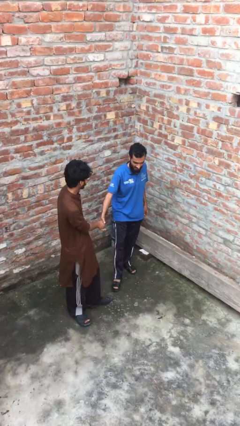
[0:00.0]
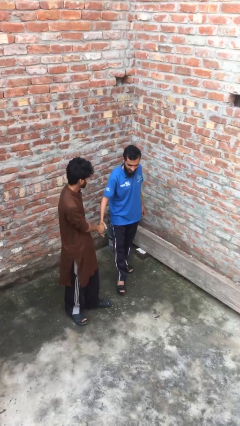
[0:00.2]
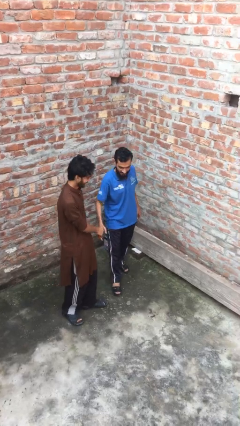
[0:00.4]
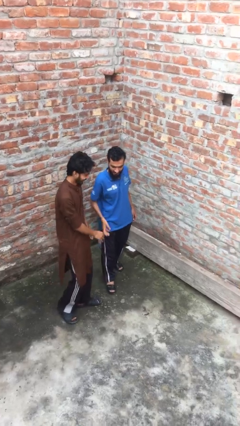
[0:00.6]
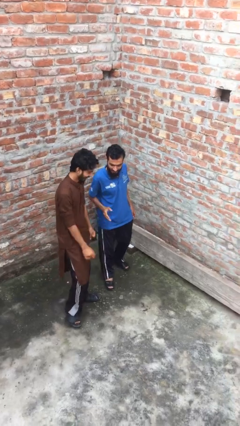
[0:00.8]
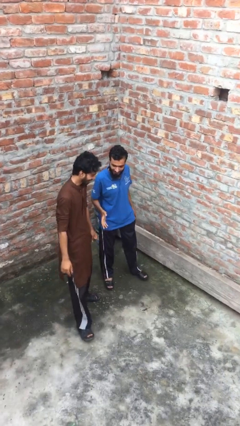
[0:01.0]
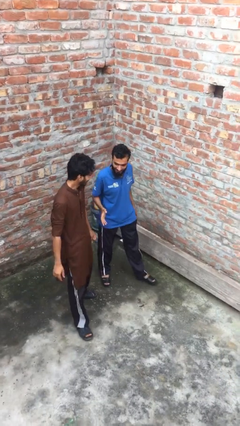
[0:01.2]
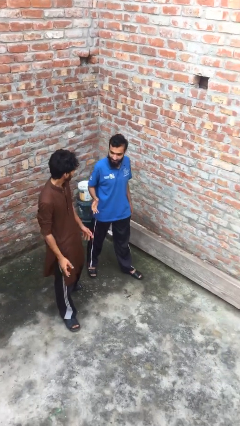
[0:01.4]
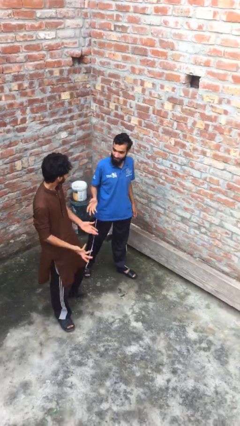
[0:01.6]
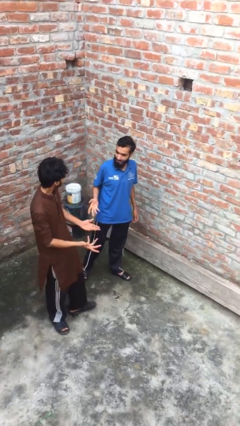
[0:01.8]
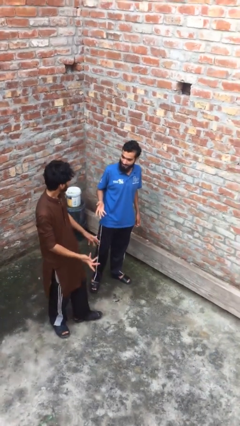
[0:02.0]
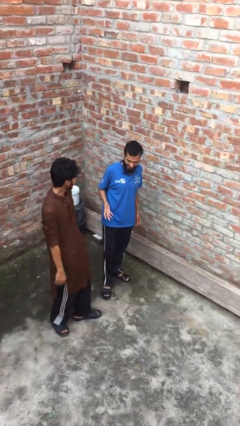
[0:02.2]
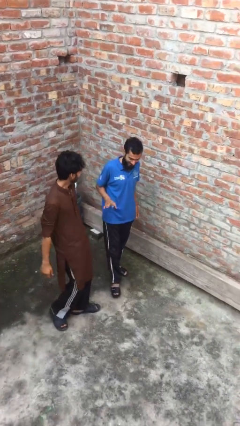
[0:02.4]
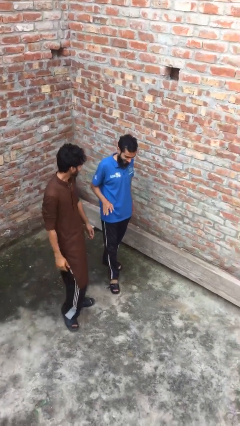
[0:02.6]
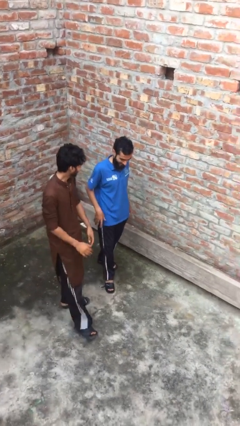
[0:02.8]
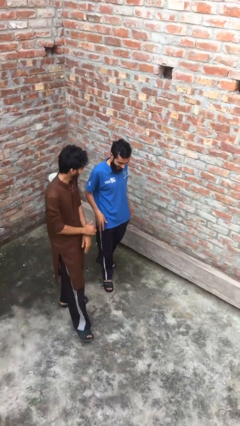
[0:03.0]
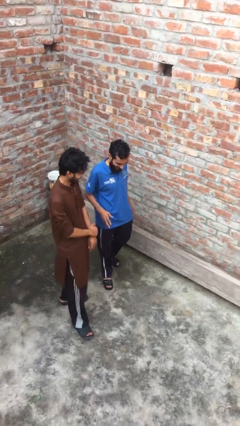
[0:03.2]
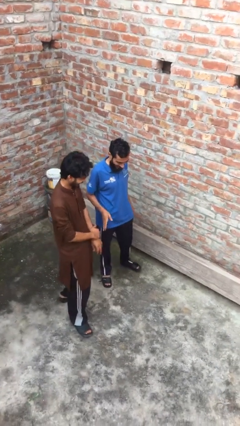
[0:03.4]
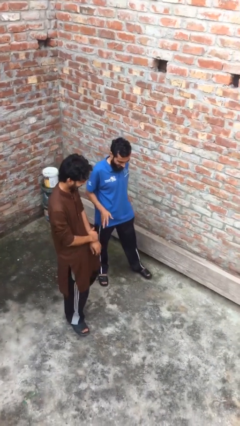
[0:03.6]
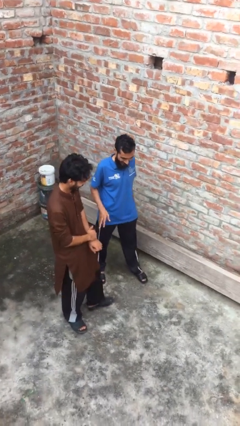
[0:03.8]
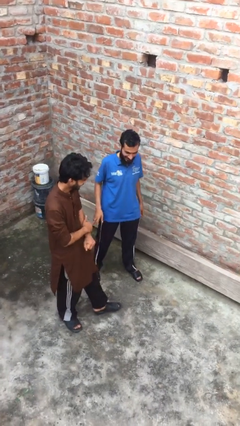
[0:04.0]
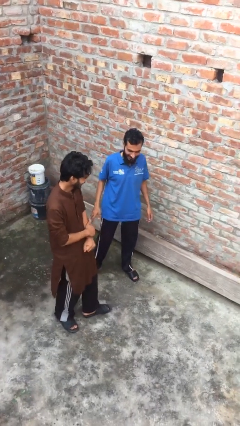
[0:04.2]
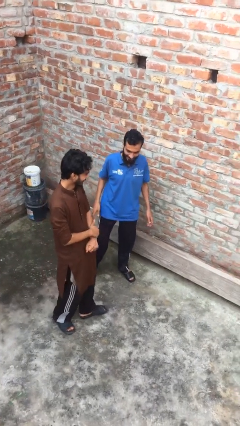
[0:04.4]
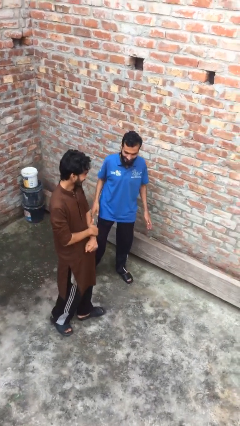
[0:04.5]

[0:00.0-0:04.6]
person talks to person

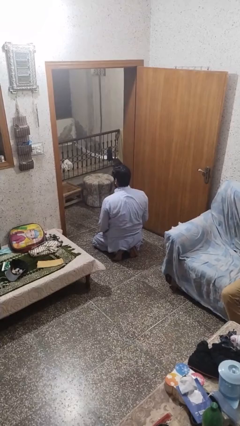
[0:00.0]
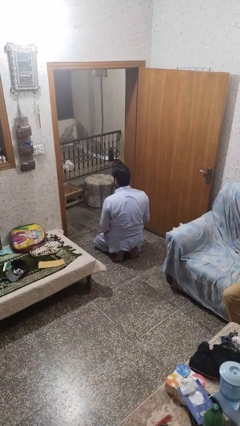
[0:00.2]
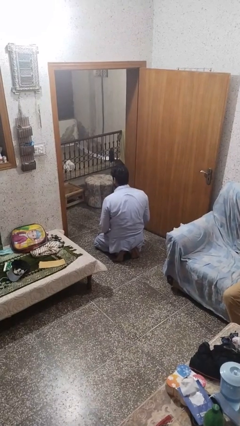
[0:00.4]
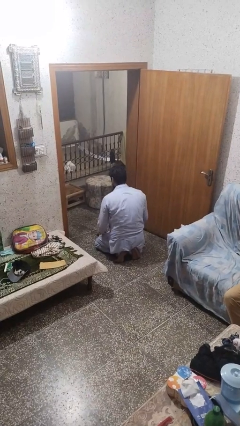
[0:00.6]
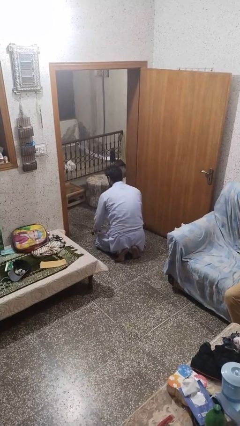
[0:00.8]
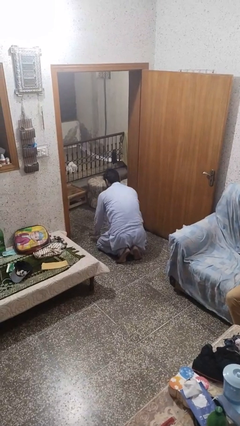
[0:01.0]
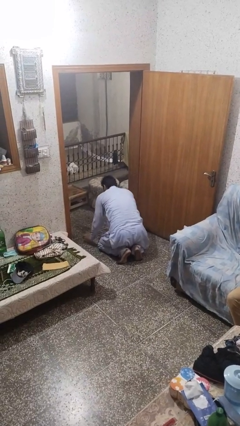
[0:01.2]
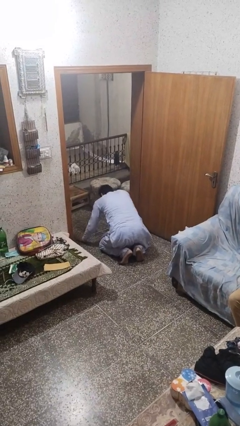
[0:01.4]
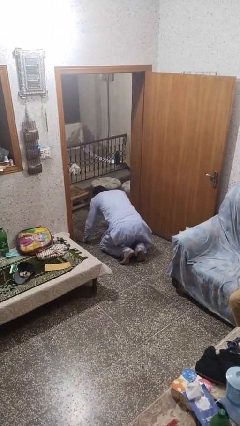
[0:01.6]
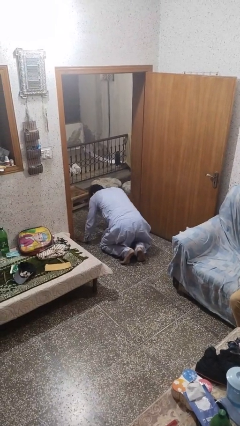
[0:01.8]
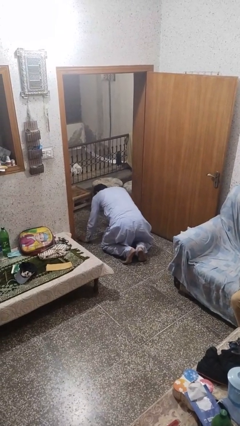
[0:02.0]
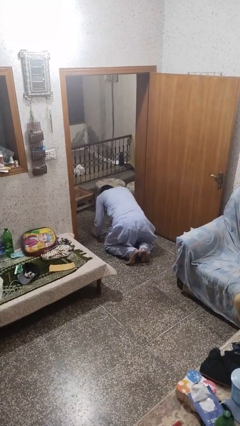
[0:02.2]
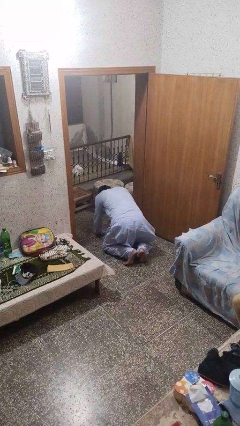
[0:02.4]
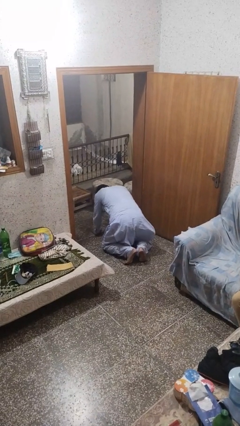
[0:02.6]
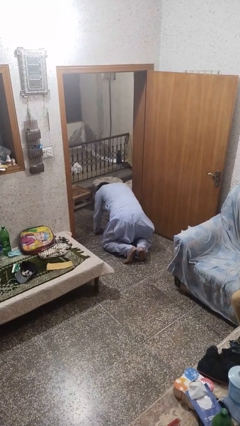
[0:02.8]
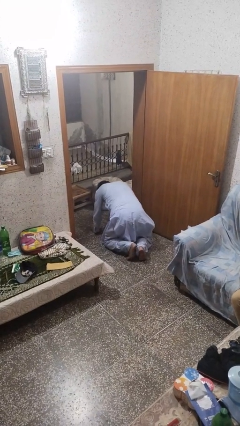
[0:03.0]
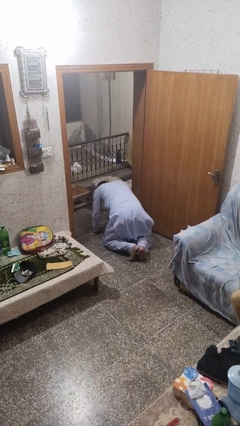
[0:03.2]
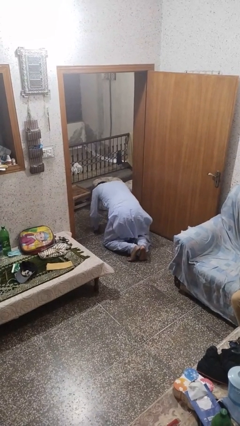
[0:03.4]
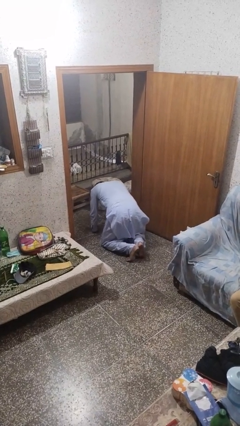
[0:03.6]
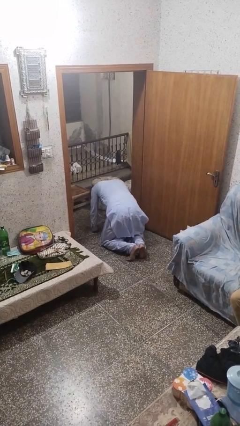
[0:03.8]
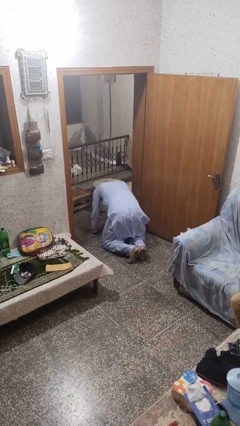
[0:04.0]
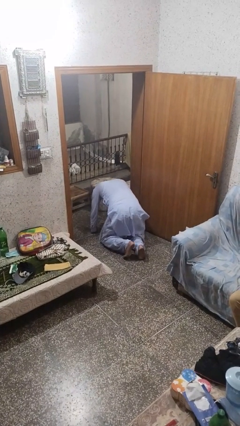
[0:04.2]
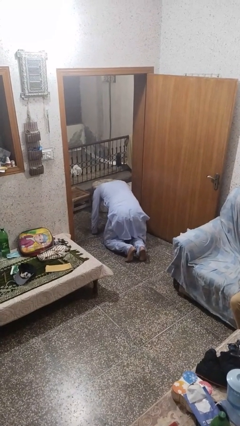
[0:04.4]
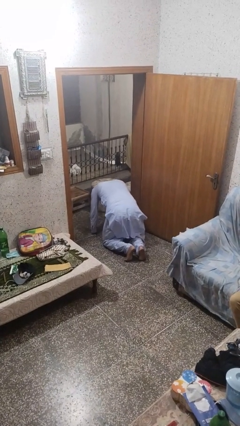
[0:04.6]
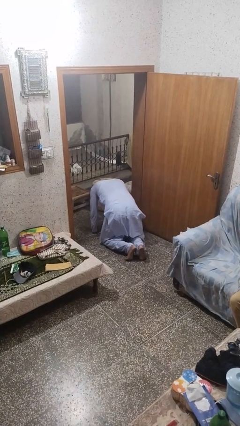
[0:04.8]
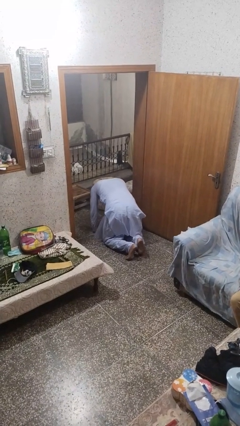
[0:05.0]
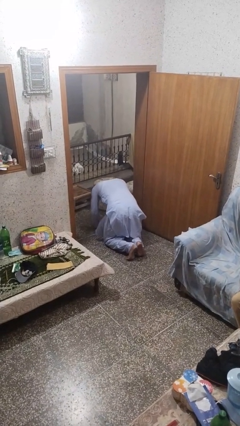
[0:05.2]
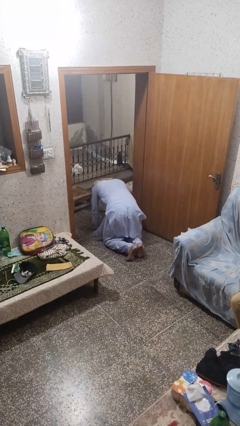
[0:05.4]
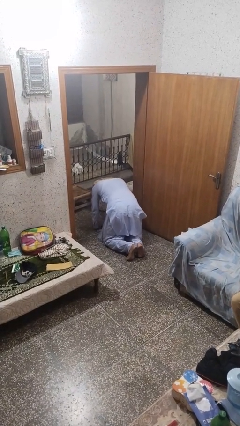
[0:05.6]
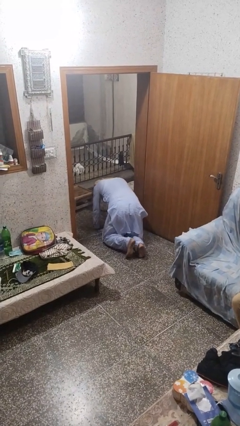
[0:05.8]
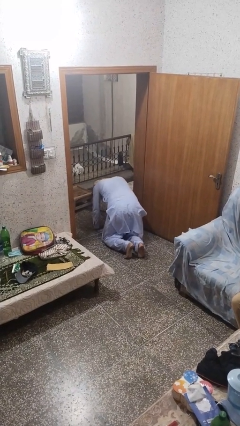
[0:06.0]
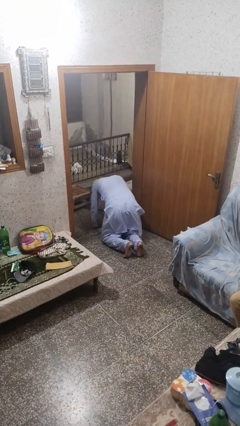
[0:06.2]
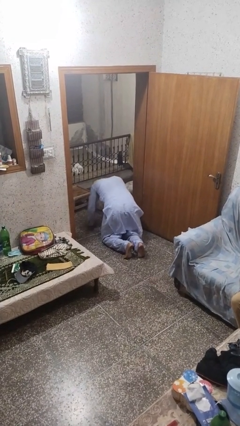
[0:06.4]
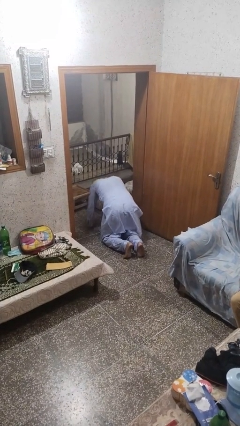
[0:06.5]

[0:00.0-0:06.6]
person crawls

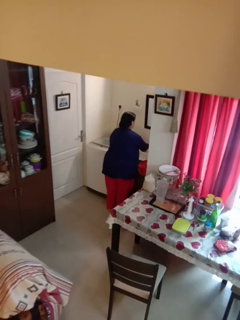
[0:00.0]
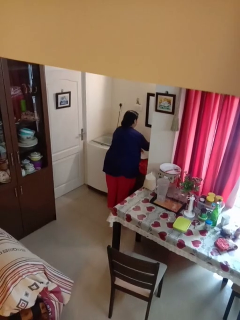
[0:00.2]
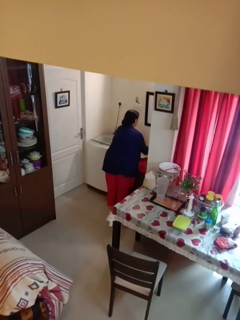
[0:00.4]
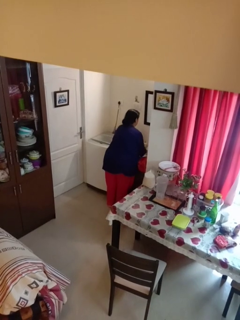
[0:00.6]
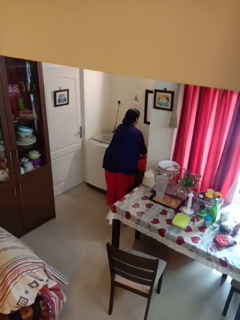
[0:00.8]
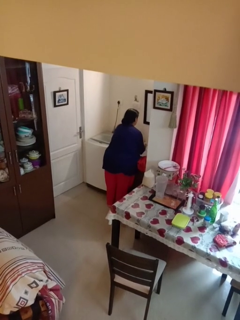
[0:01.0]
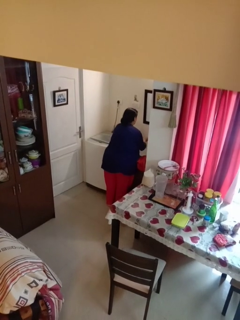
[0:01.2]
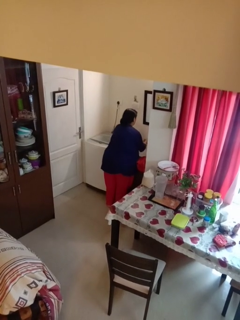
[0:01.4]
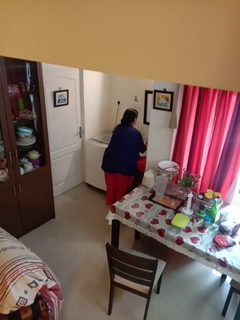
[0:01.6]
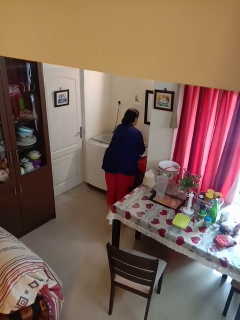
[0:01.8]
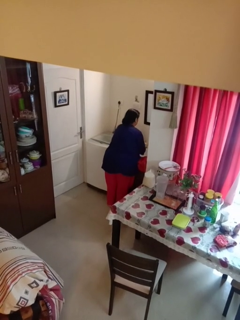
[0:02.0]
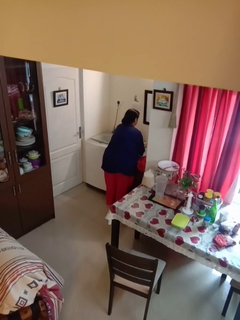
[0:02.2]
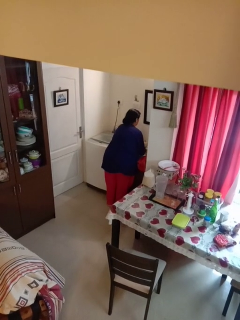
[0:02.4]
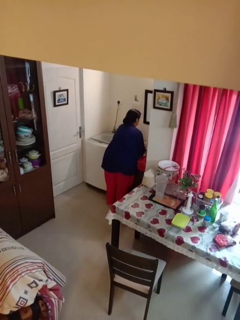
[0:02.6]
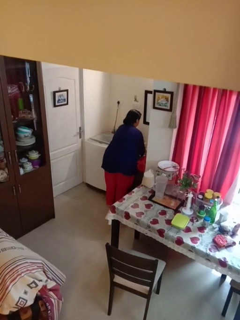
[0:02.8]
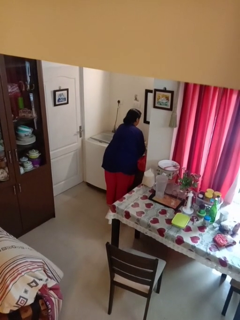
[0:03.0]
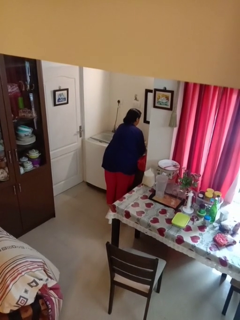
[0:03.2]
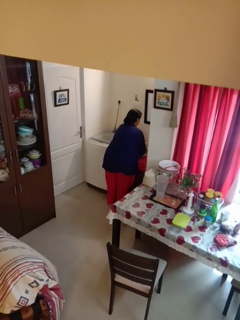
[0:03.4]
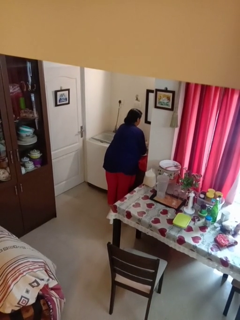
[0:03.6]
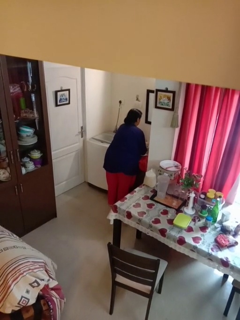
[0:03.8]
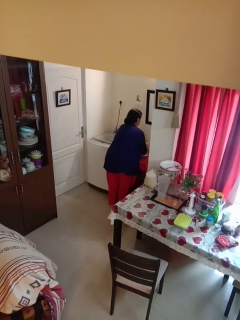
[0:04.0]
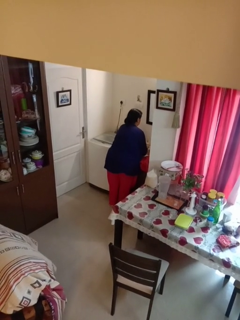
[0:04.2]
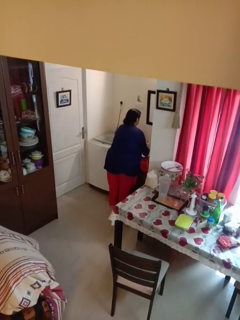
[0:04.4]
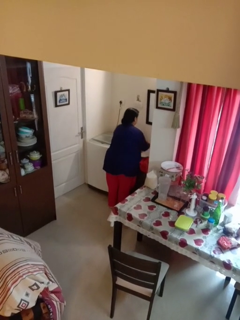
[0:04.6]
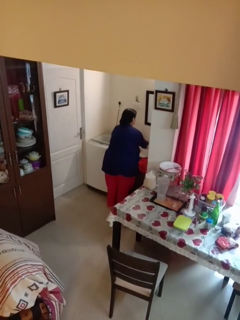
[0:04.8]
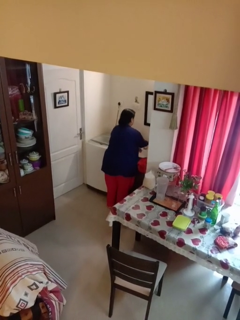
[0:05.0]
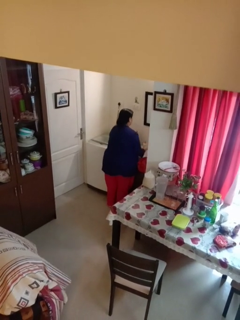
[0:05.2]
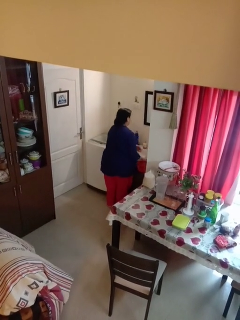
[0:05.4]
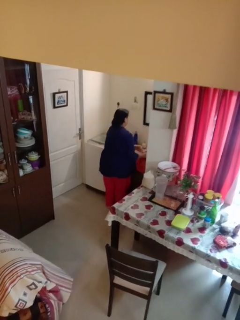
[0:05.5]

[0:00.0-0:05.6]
person washes hands

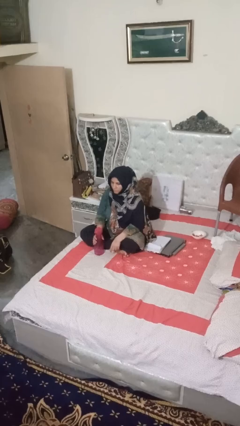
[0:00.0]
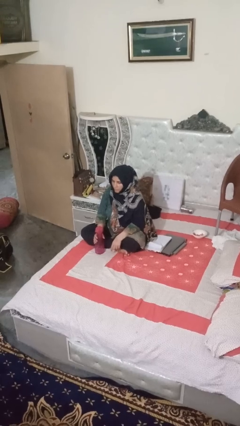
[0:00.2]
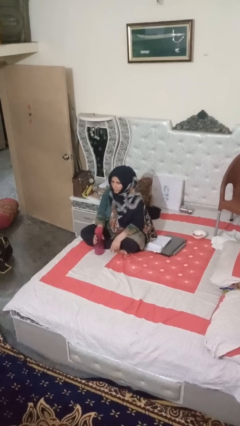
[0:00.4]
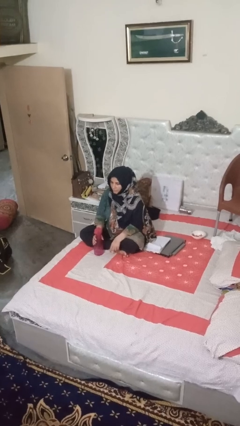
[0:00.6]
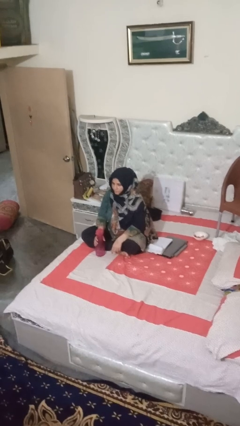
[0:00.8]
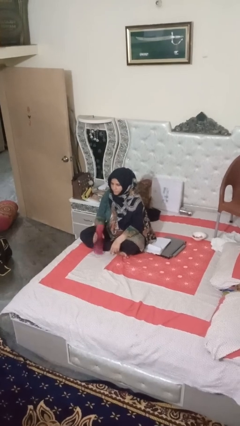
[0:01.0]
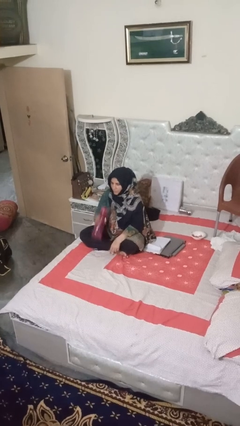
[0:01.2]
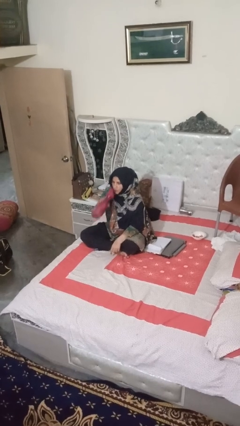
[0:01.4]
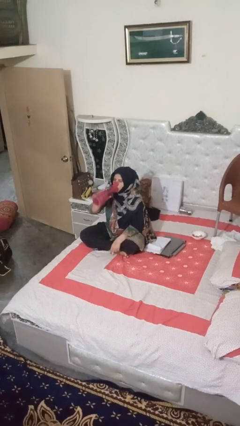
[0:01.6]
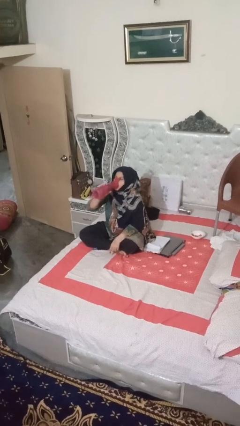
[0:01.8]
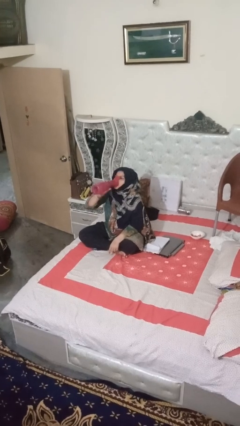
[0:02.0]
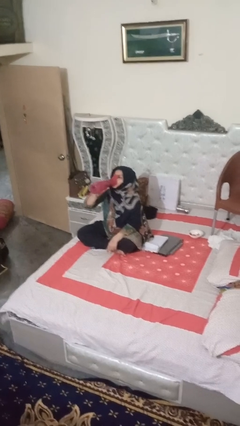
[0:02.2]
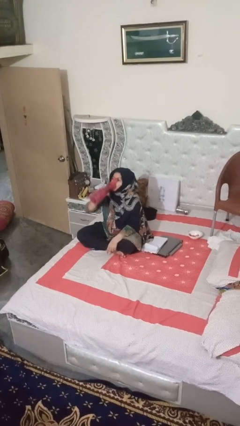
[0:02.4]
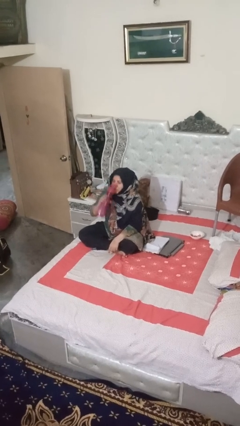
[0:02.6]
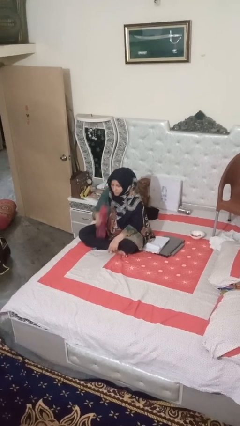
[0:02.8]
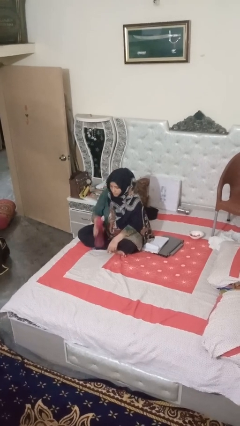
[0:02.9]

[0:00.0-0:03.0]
person drinks from bottle
